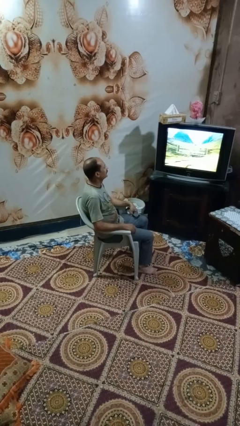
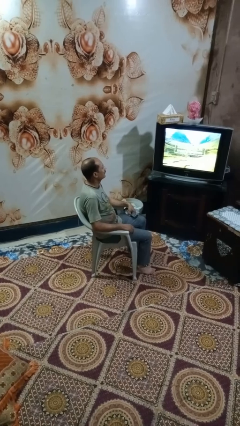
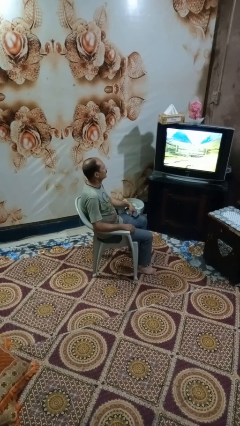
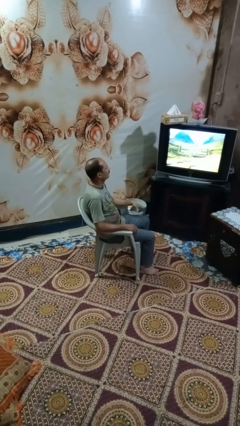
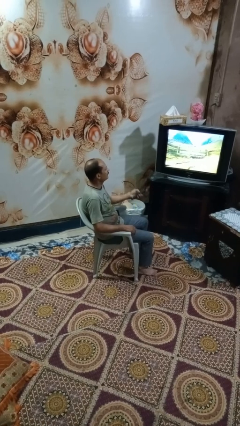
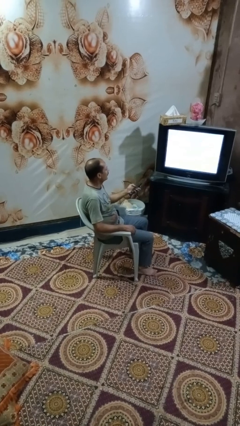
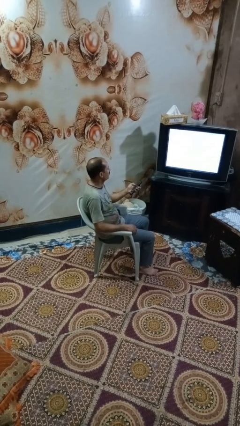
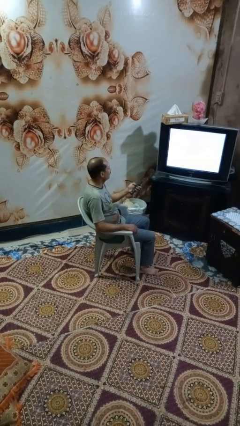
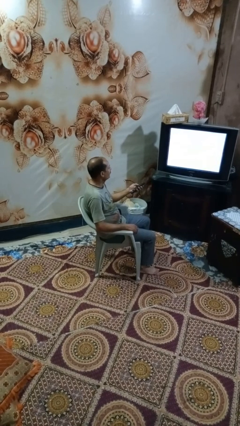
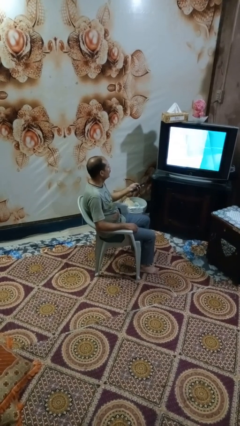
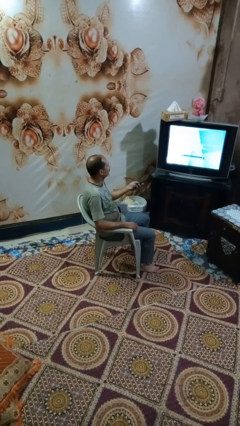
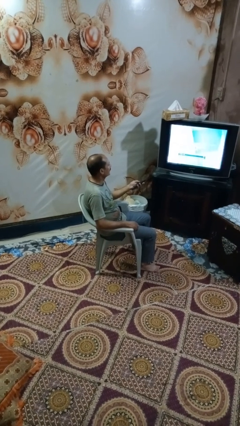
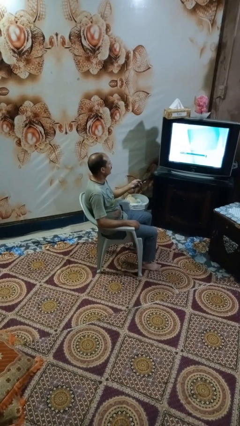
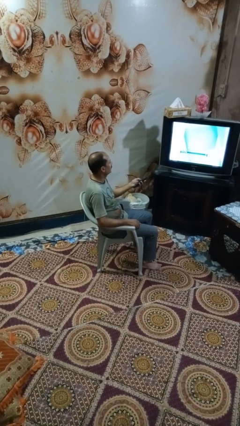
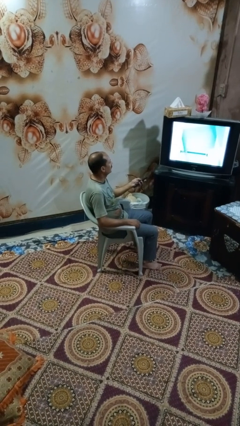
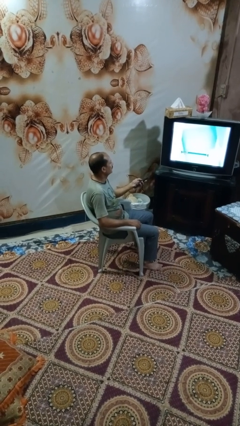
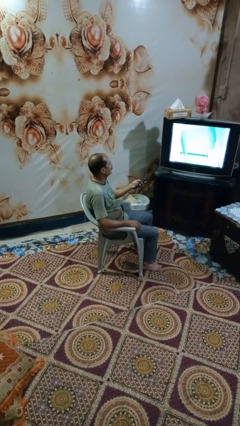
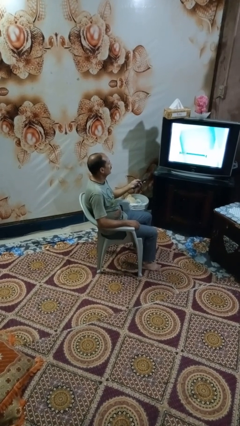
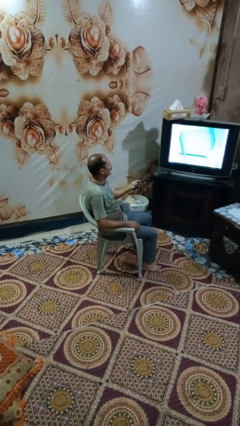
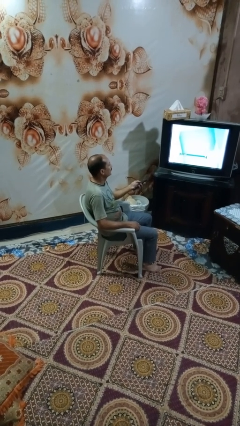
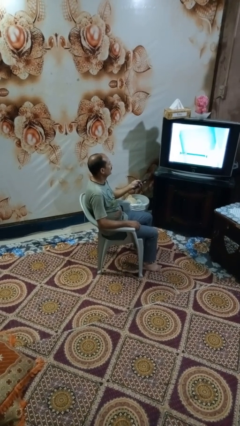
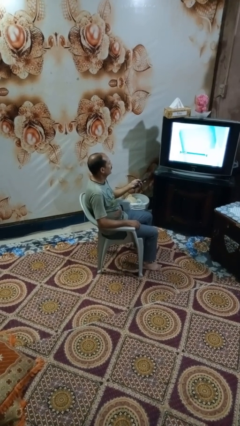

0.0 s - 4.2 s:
person uses television remote

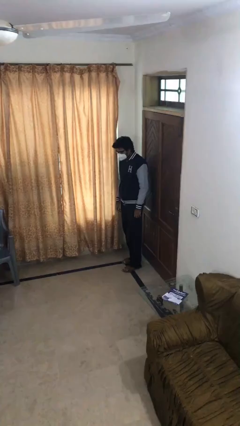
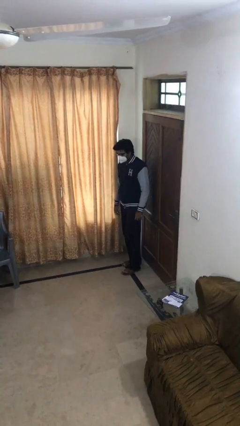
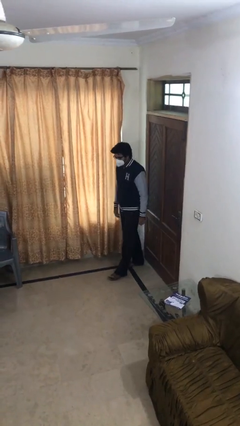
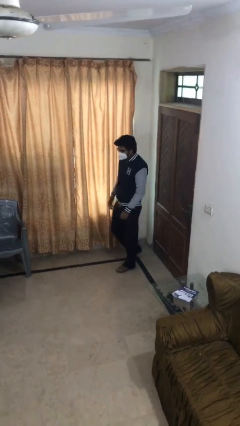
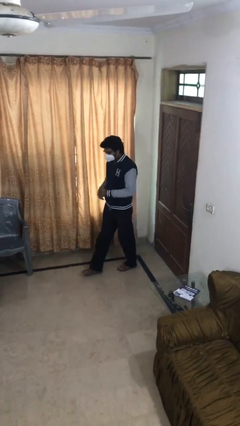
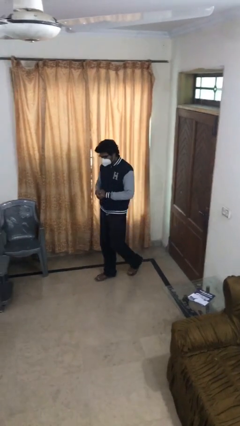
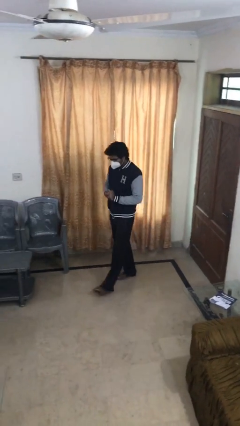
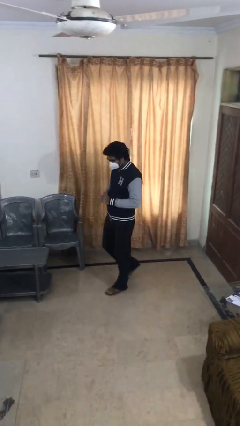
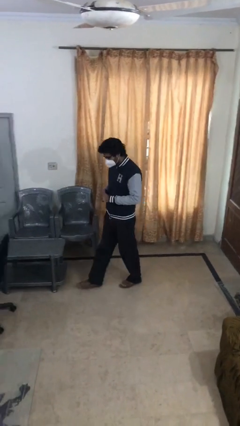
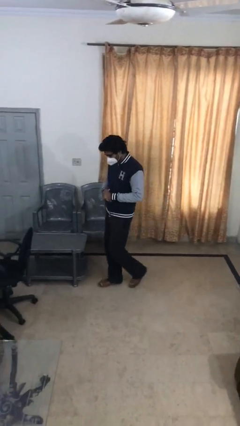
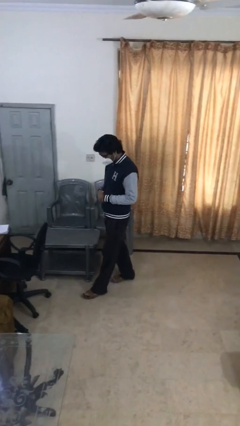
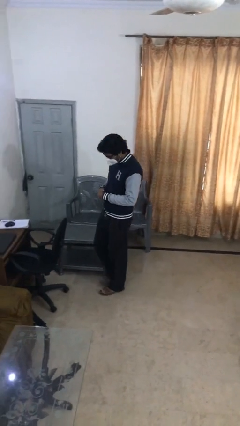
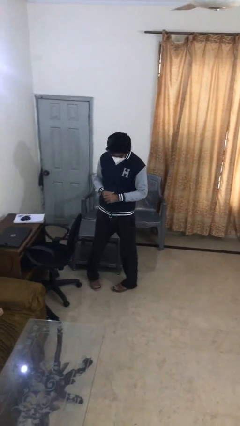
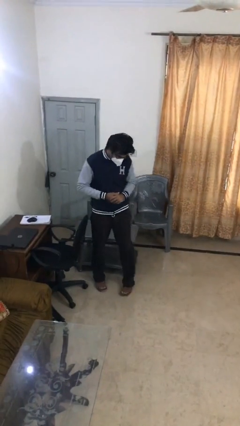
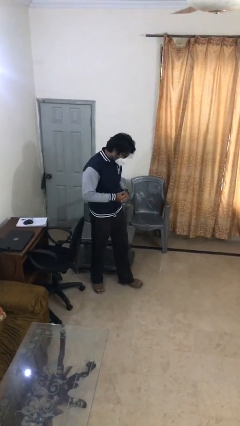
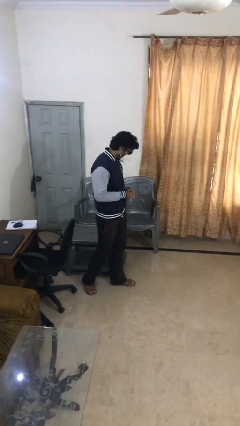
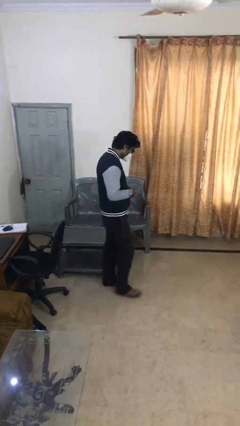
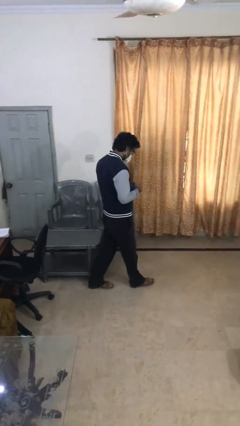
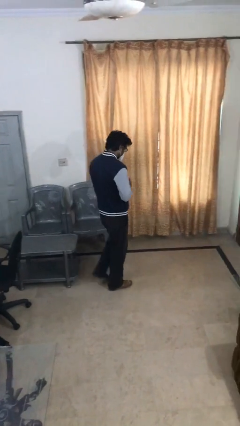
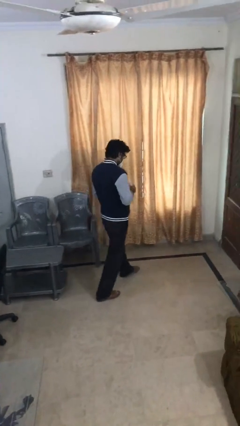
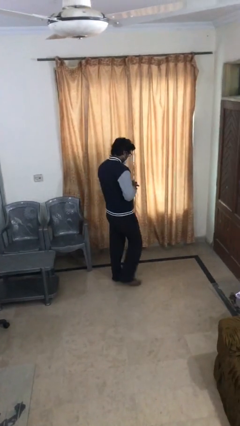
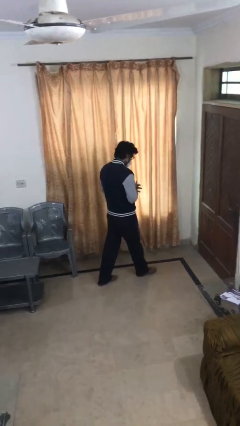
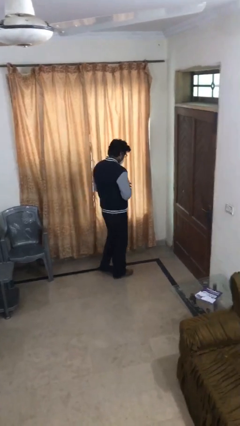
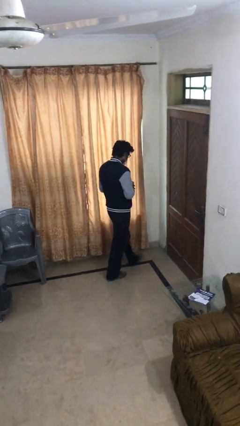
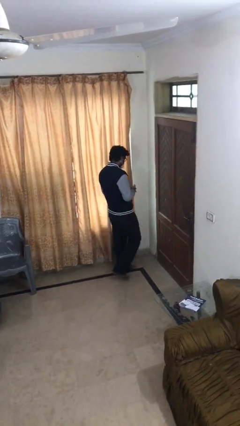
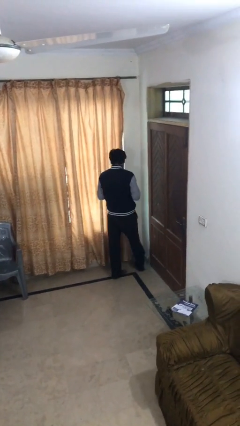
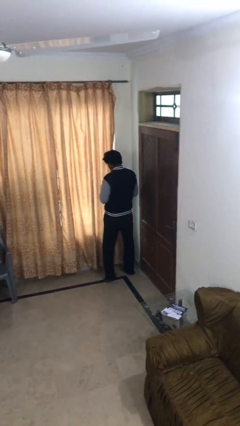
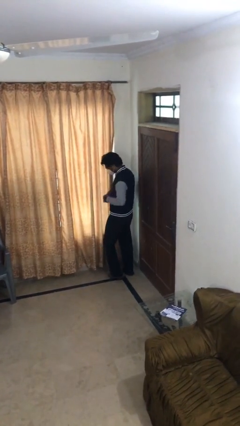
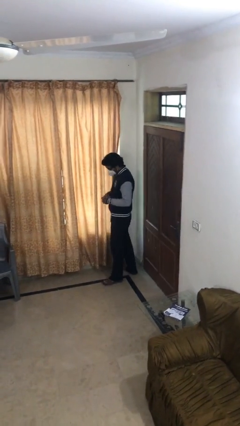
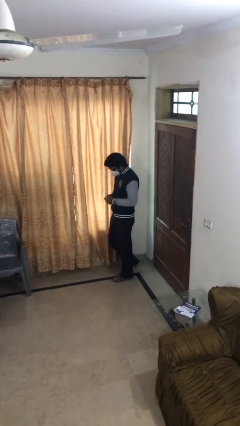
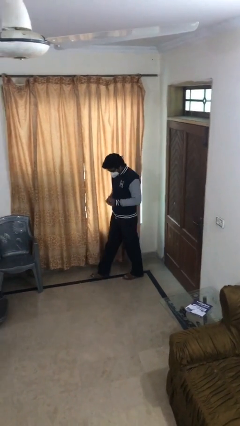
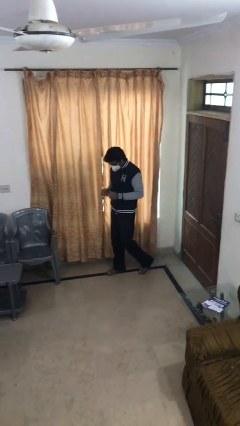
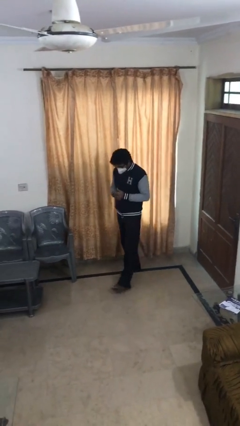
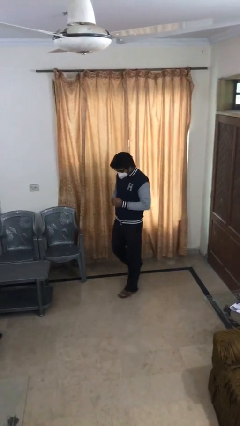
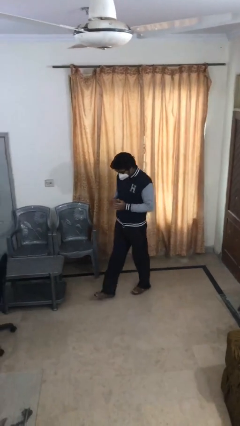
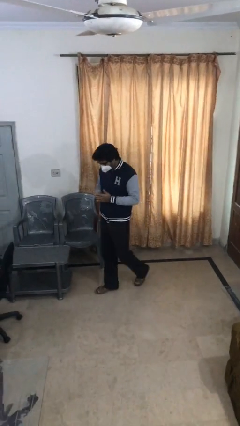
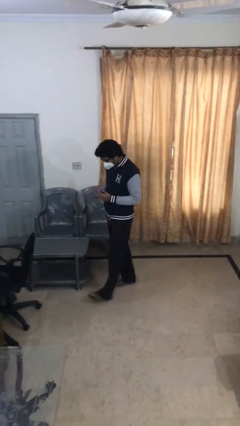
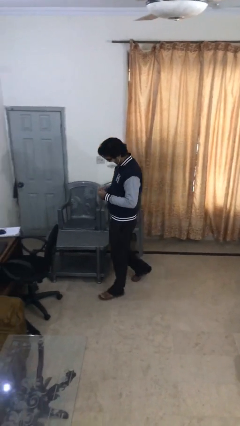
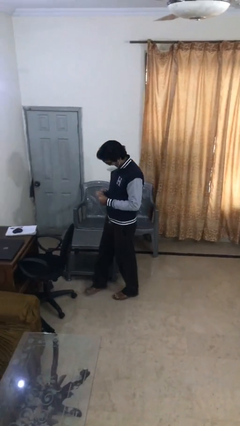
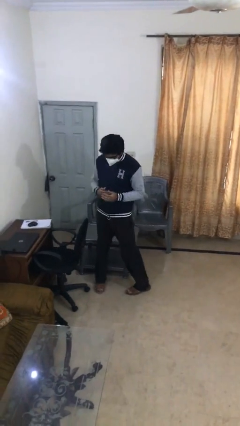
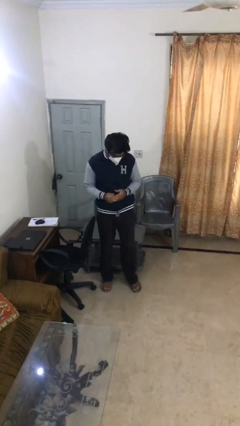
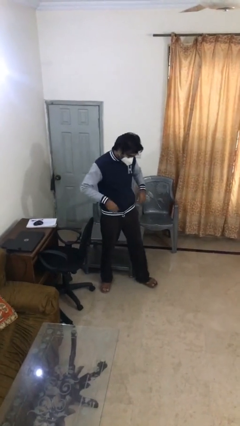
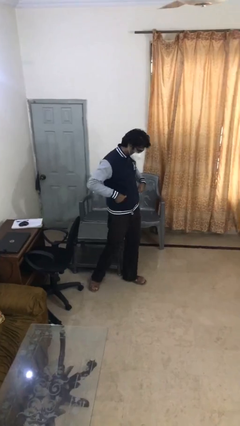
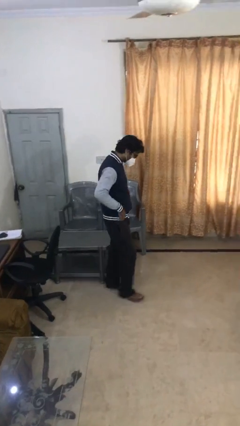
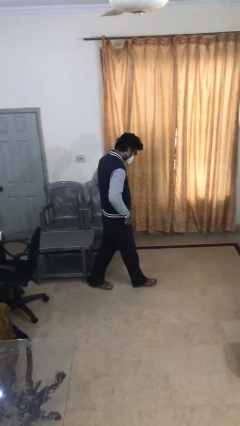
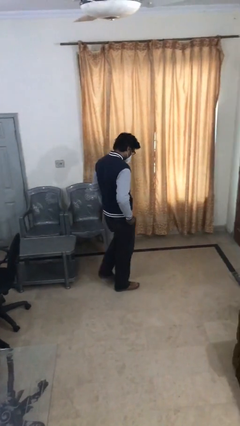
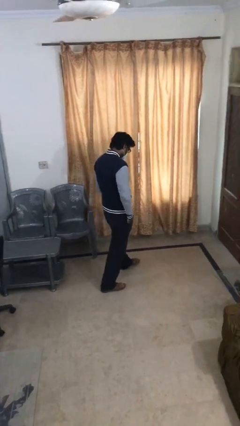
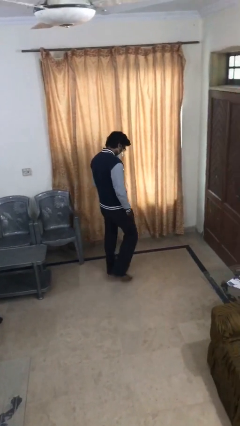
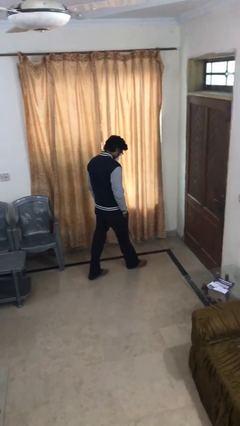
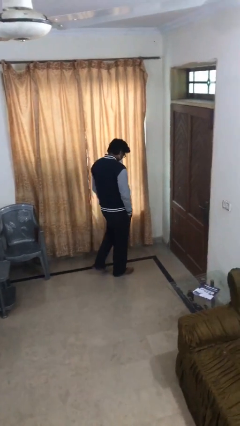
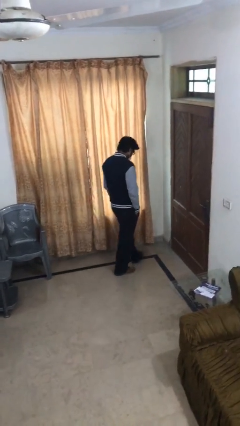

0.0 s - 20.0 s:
person walks

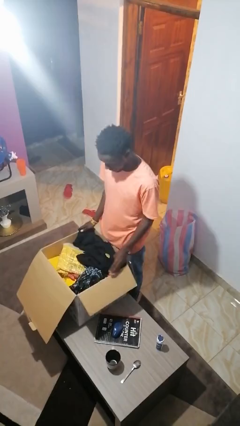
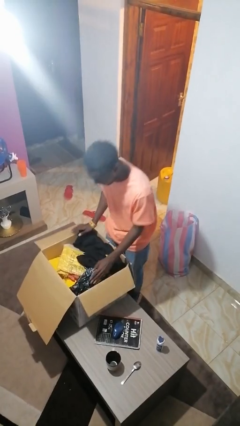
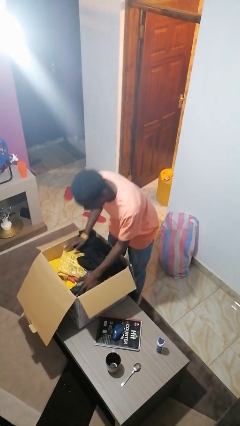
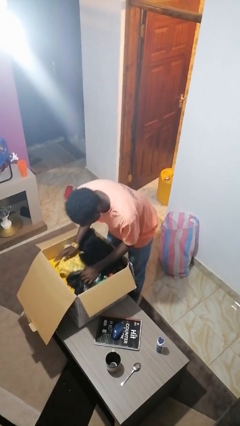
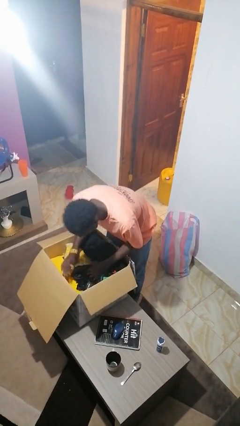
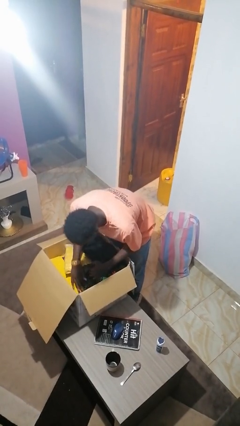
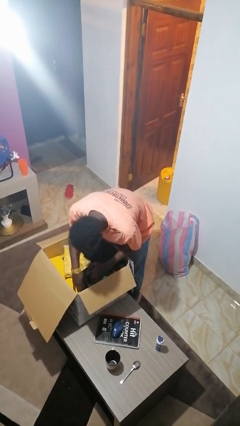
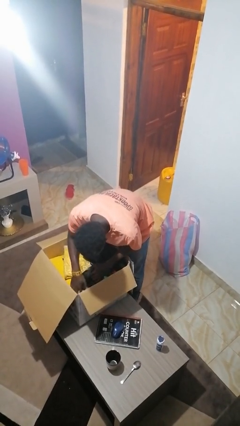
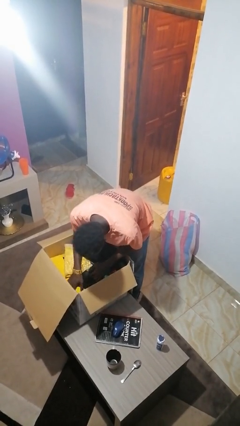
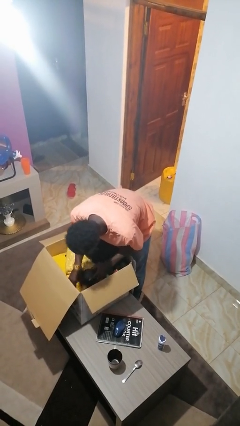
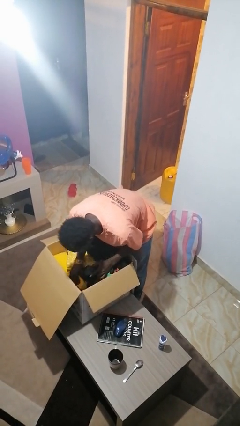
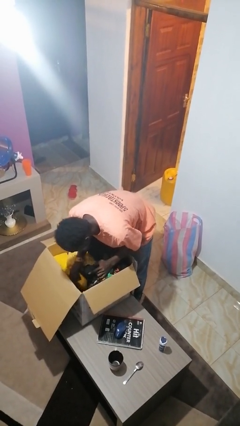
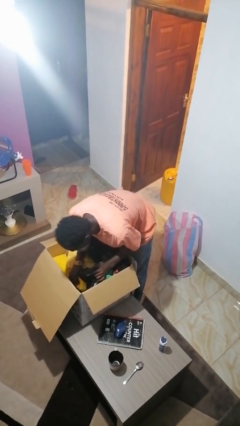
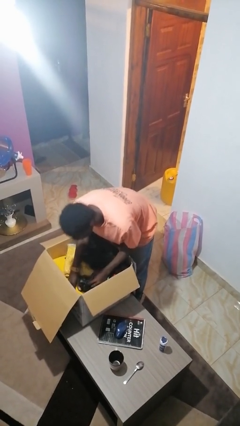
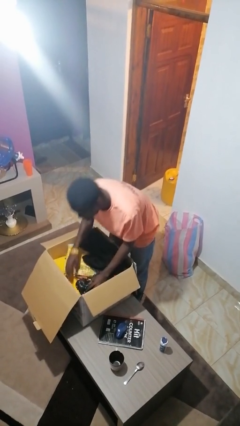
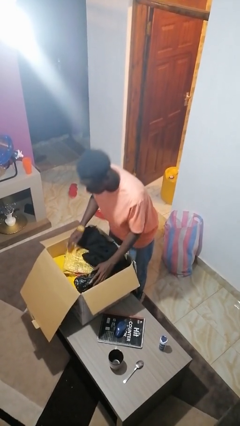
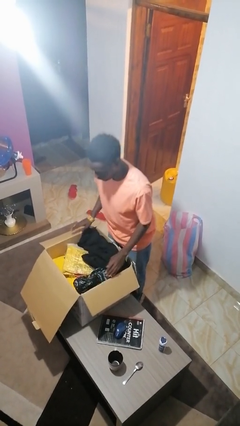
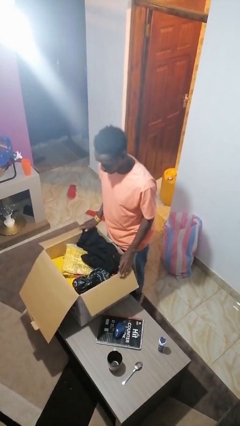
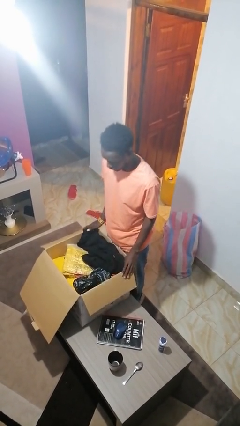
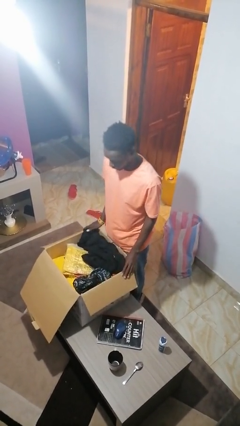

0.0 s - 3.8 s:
person searches in box

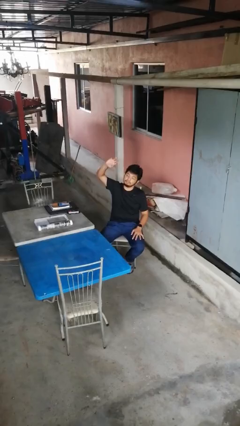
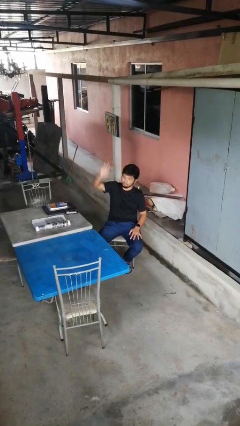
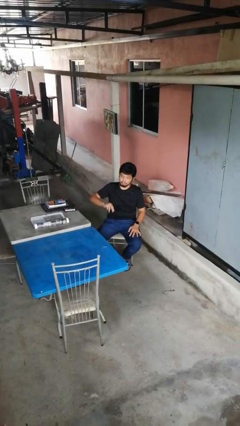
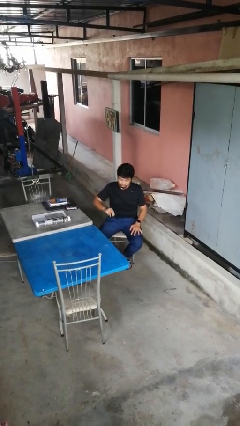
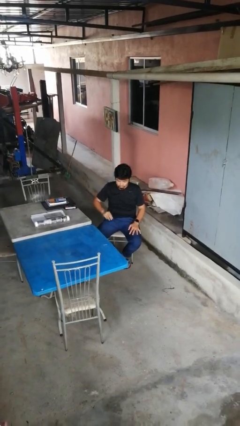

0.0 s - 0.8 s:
person gestures swipe down
